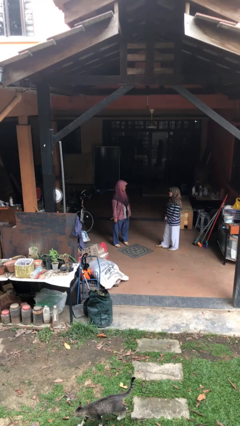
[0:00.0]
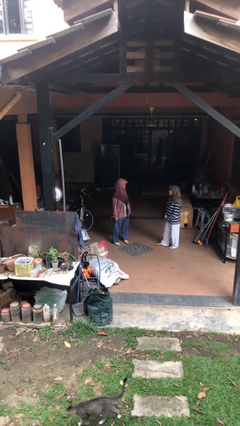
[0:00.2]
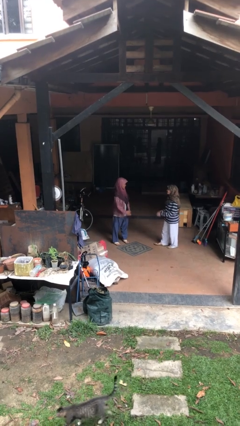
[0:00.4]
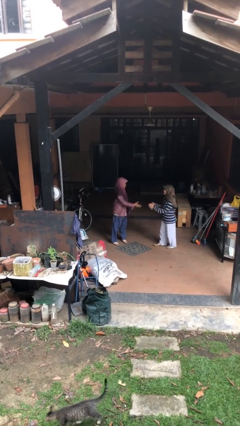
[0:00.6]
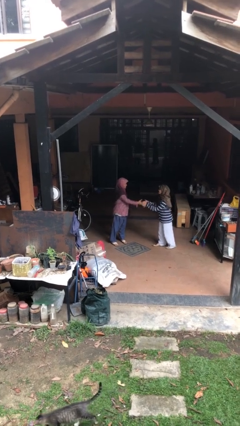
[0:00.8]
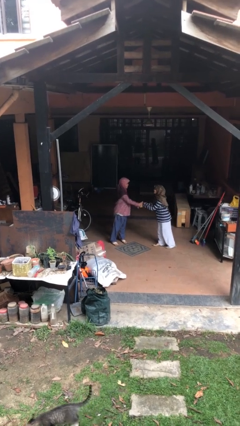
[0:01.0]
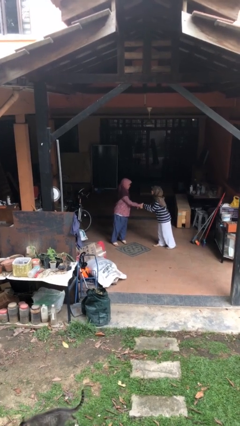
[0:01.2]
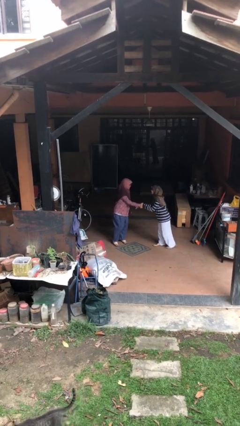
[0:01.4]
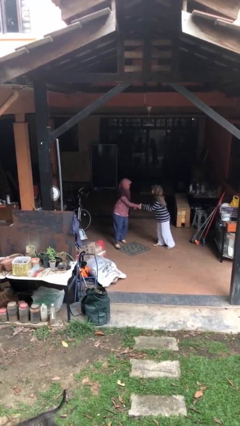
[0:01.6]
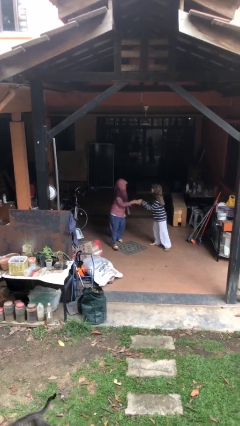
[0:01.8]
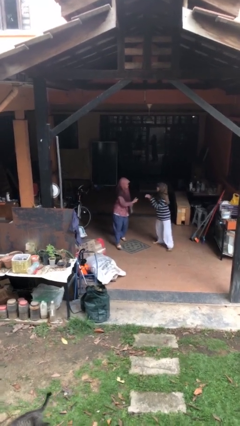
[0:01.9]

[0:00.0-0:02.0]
person shakes hand

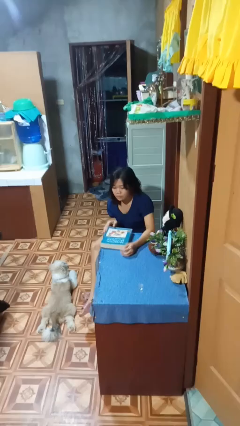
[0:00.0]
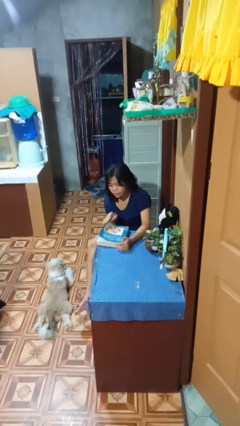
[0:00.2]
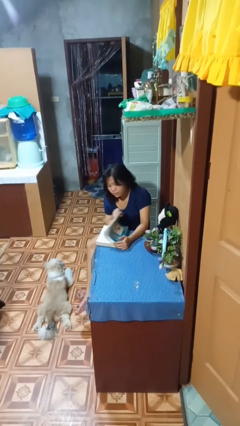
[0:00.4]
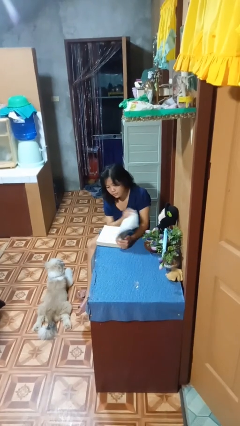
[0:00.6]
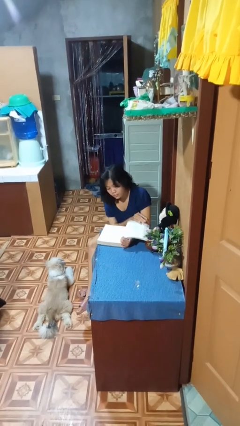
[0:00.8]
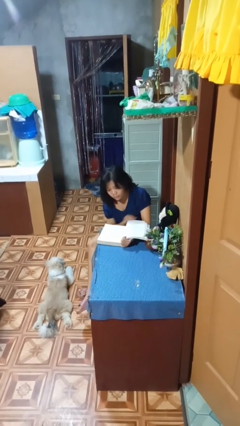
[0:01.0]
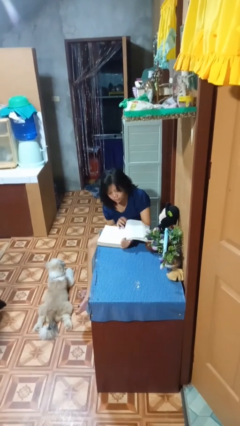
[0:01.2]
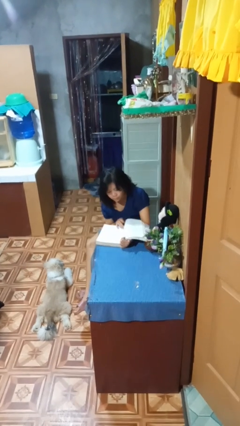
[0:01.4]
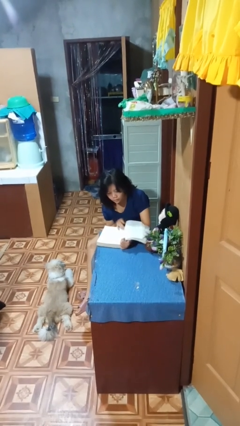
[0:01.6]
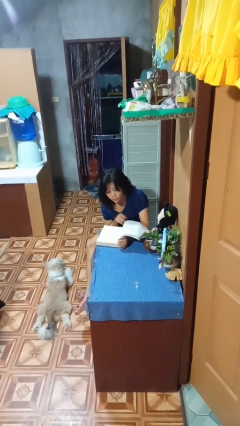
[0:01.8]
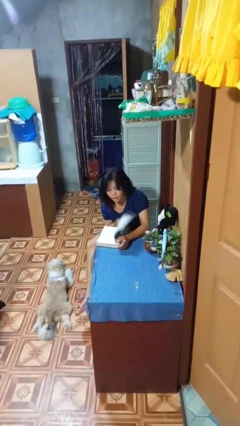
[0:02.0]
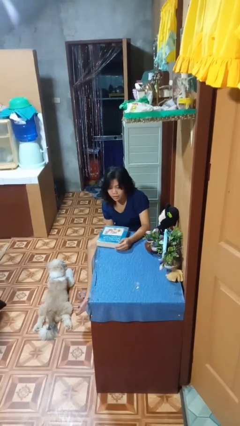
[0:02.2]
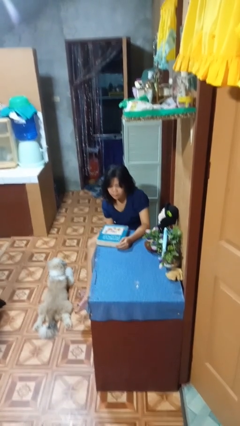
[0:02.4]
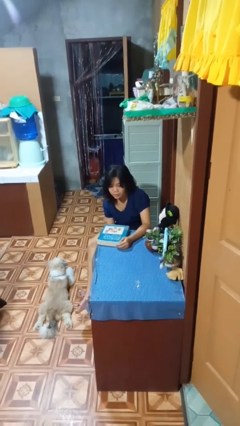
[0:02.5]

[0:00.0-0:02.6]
person reads book

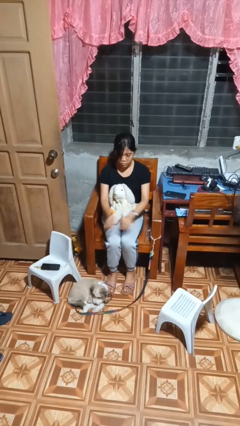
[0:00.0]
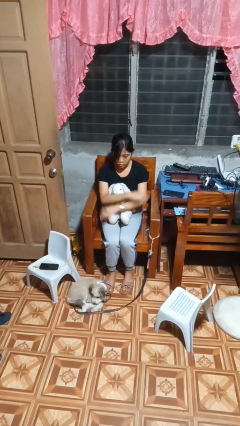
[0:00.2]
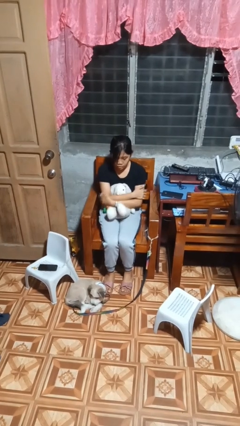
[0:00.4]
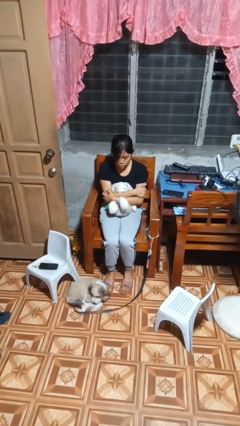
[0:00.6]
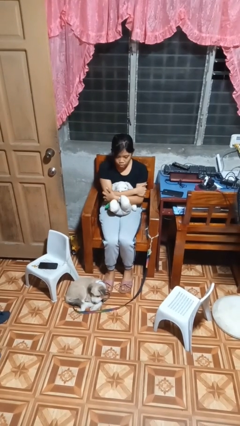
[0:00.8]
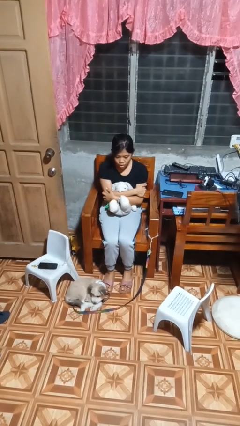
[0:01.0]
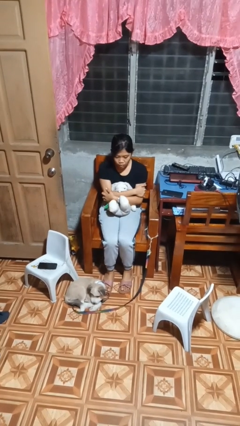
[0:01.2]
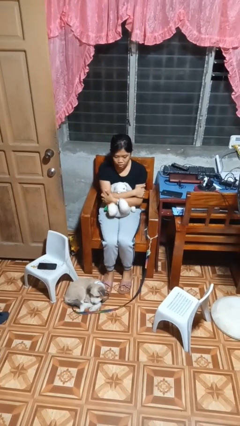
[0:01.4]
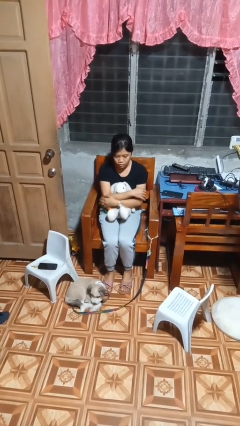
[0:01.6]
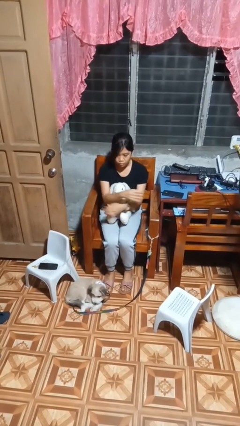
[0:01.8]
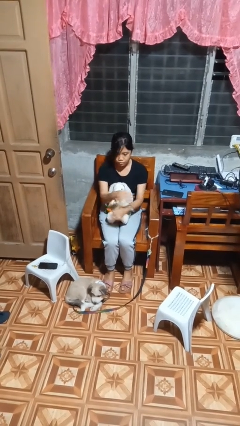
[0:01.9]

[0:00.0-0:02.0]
person hugs stuffed animal

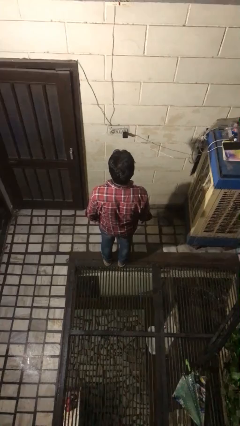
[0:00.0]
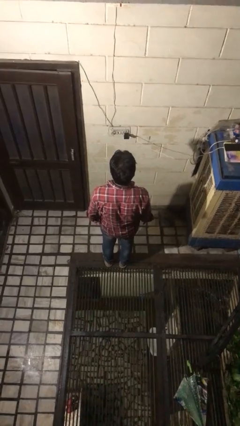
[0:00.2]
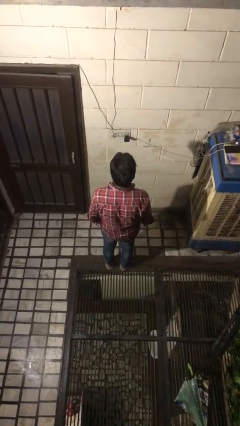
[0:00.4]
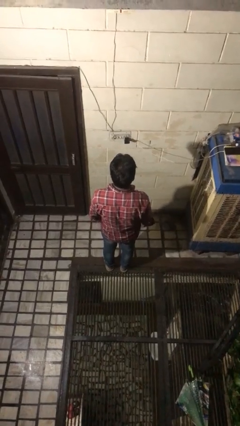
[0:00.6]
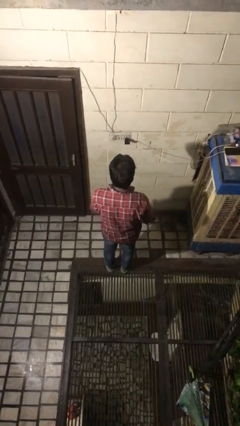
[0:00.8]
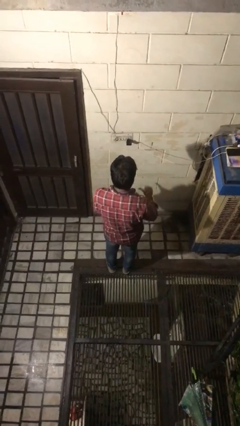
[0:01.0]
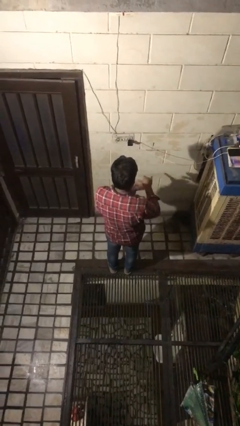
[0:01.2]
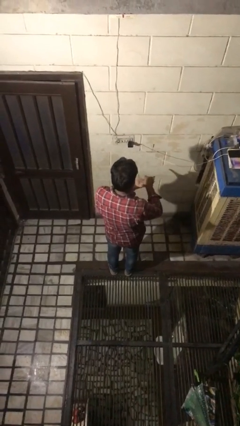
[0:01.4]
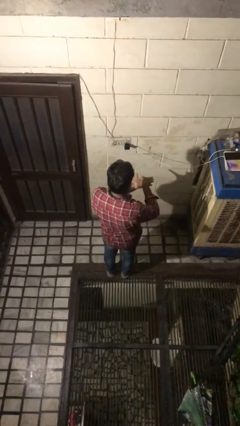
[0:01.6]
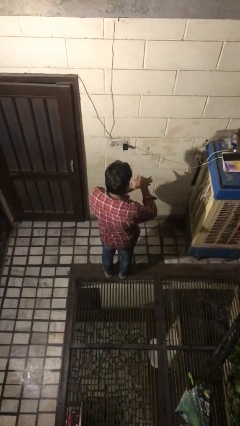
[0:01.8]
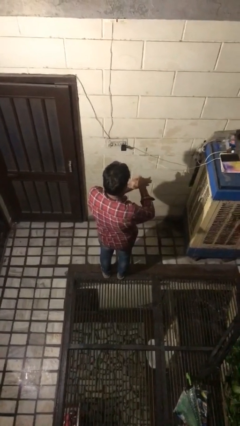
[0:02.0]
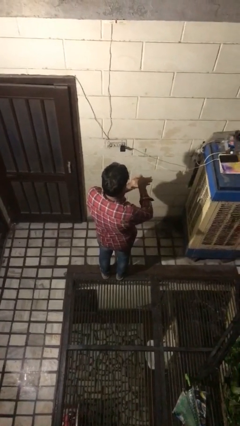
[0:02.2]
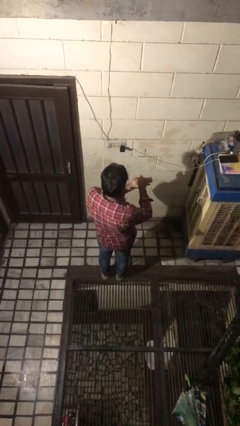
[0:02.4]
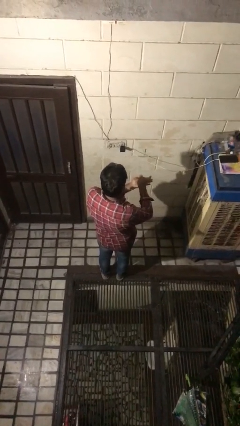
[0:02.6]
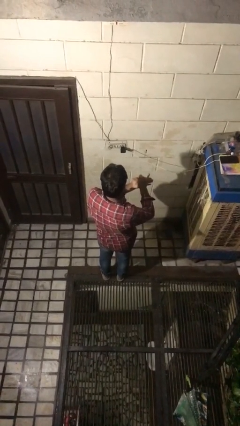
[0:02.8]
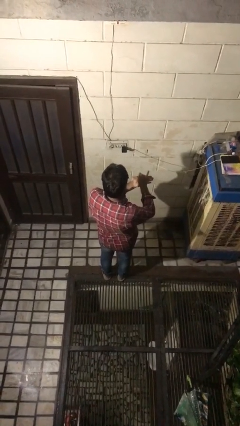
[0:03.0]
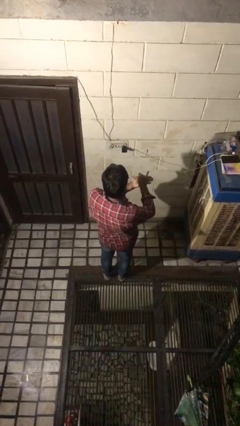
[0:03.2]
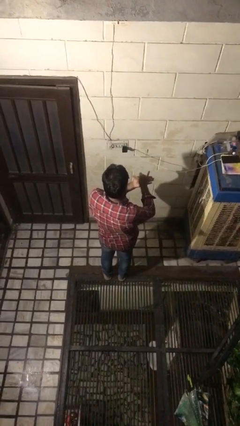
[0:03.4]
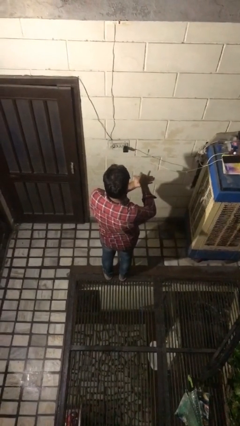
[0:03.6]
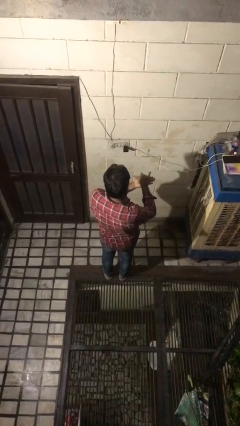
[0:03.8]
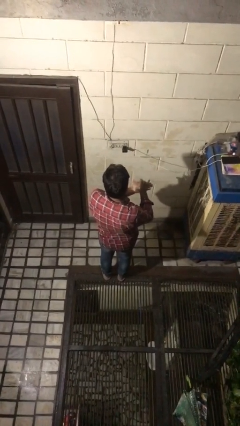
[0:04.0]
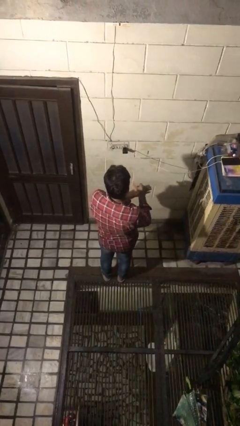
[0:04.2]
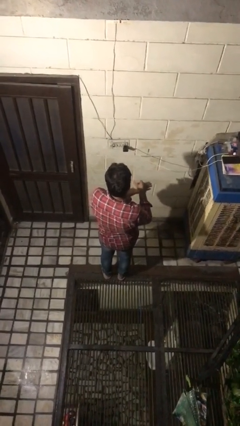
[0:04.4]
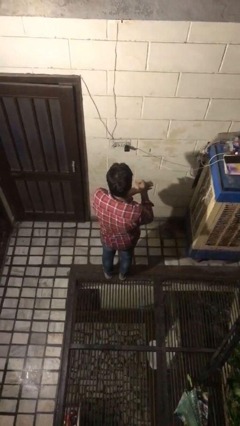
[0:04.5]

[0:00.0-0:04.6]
person gestures hang loose

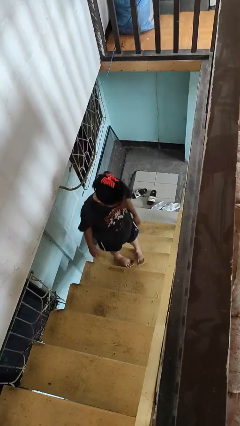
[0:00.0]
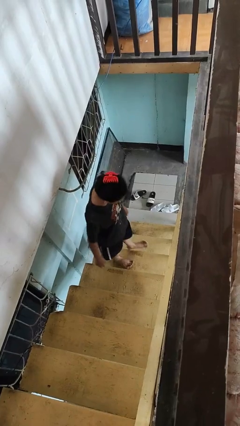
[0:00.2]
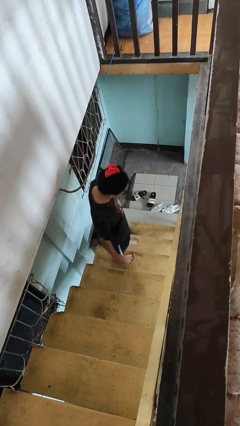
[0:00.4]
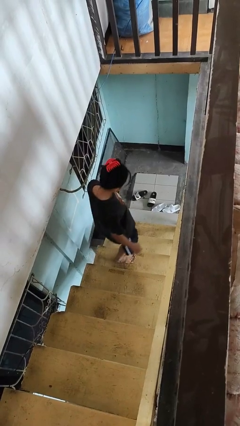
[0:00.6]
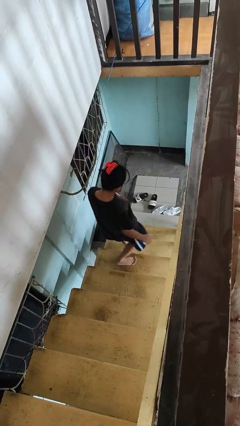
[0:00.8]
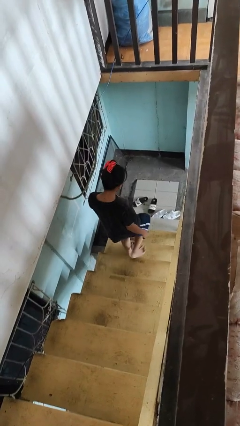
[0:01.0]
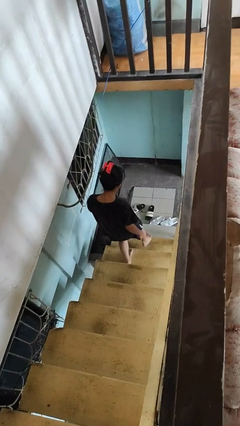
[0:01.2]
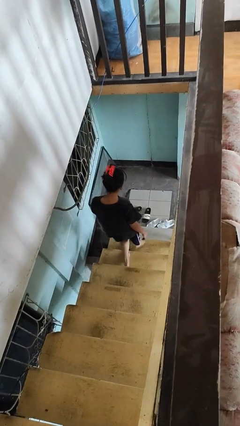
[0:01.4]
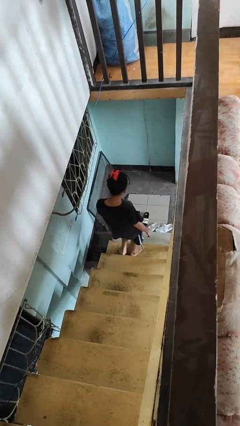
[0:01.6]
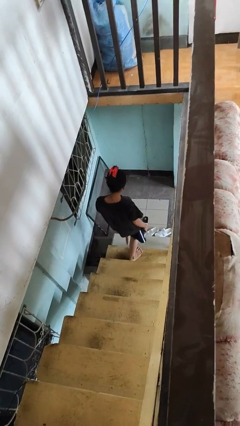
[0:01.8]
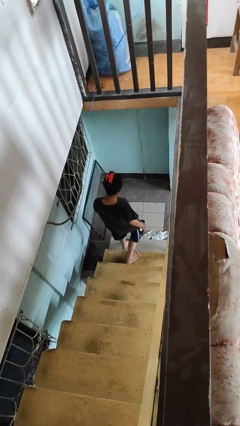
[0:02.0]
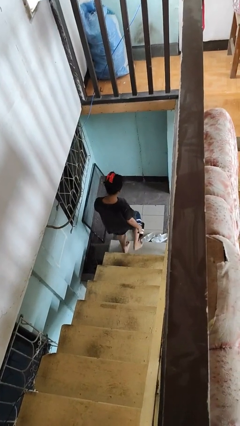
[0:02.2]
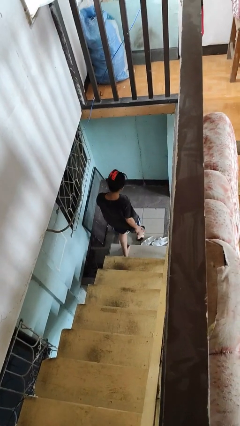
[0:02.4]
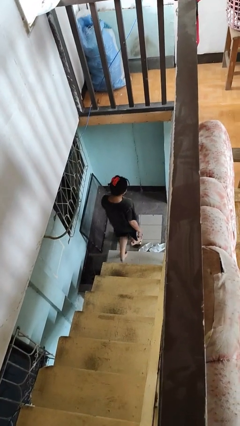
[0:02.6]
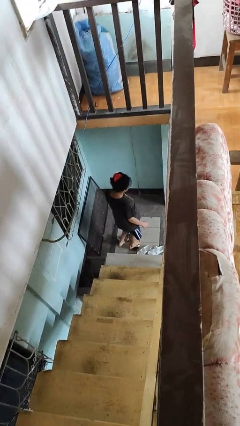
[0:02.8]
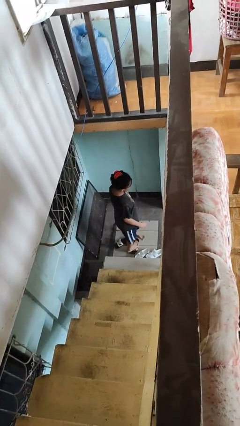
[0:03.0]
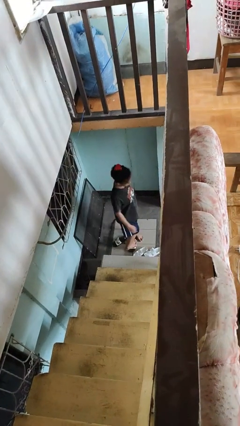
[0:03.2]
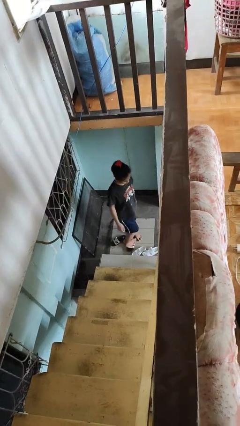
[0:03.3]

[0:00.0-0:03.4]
person climbs down stairs

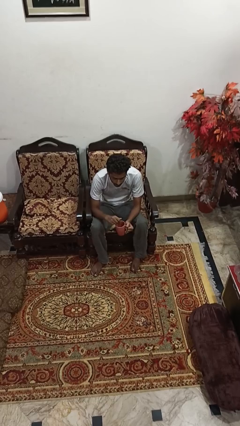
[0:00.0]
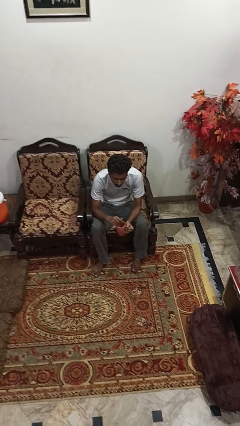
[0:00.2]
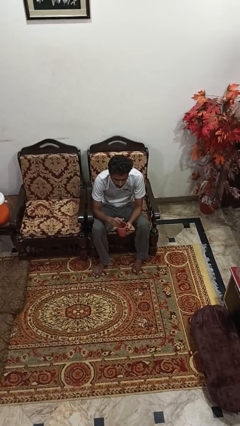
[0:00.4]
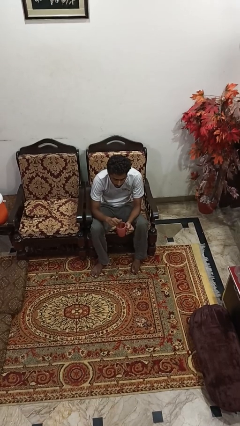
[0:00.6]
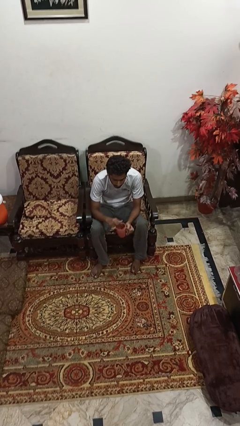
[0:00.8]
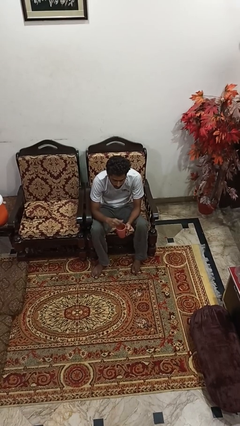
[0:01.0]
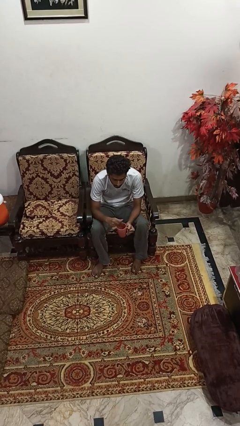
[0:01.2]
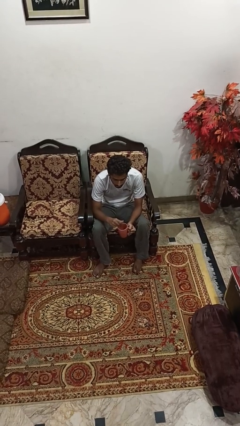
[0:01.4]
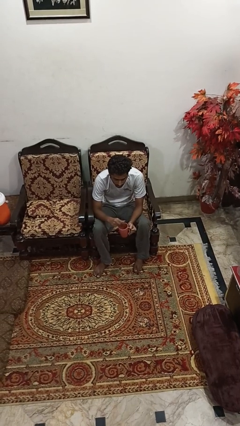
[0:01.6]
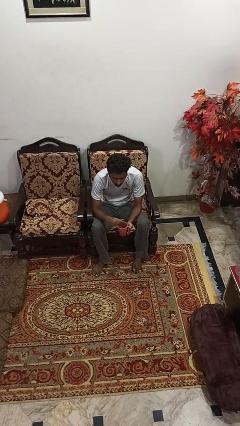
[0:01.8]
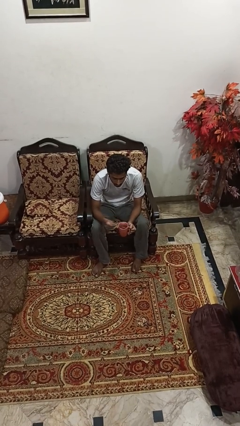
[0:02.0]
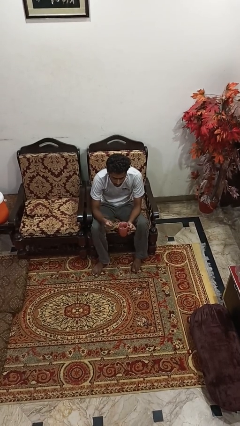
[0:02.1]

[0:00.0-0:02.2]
person stirs mug

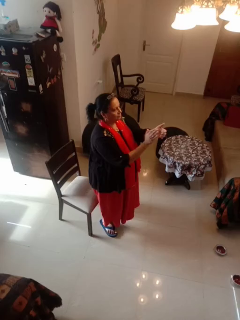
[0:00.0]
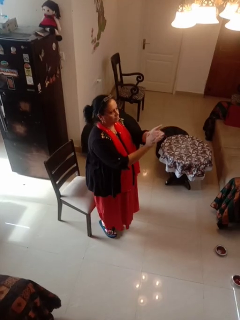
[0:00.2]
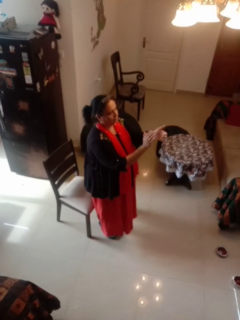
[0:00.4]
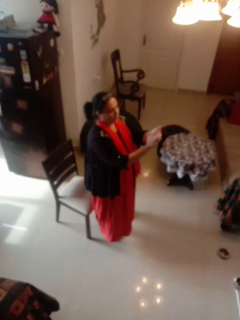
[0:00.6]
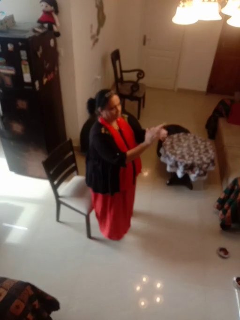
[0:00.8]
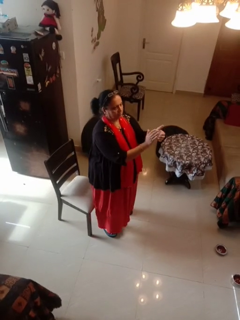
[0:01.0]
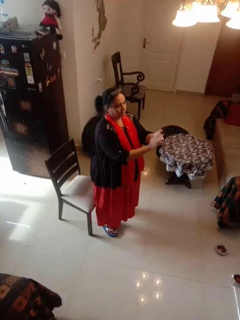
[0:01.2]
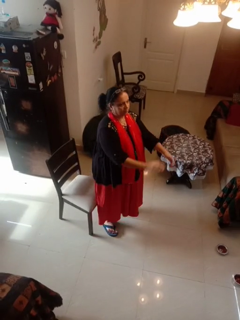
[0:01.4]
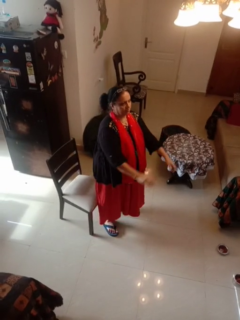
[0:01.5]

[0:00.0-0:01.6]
person claps hands
